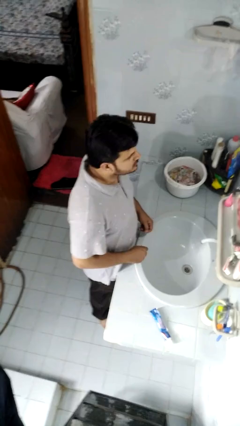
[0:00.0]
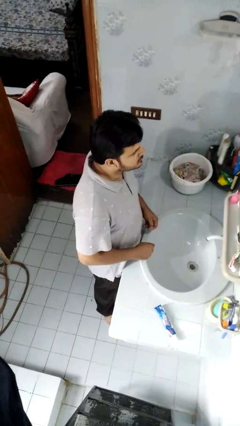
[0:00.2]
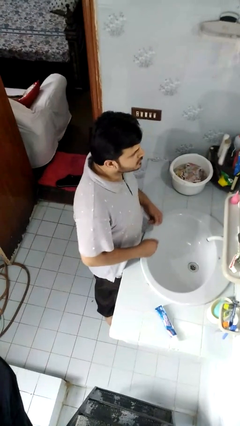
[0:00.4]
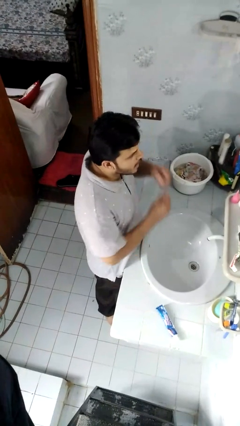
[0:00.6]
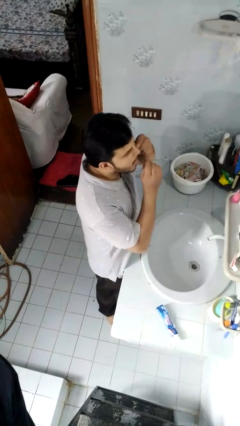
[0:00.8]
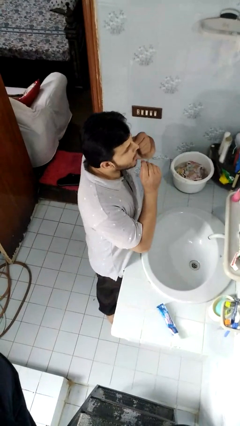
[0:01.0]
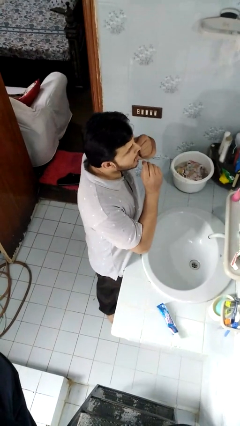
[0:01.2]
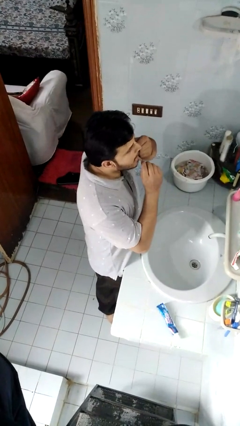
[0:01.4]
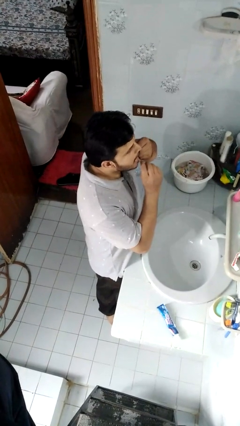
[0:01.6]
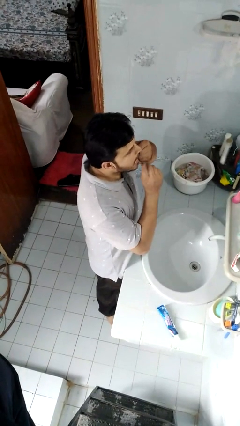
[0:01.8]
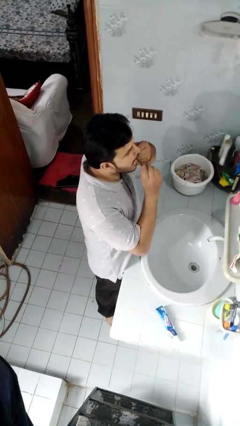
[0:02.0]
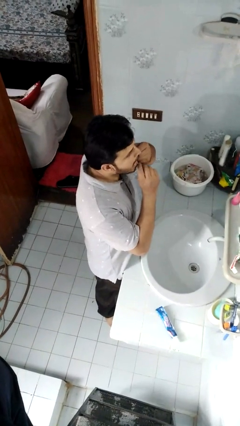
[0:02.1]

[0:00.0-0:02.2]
person flosses

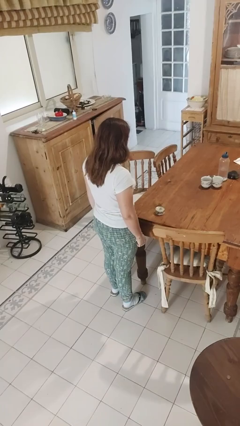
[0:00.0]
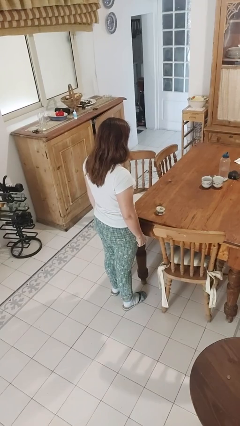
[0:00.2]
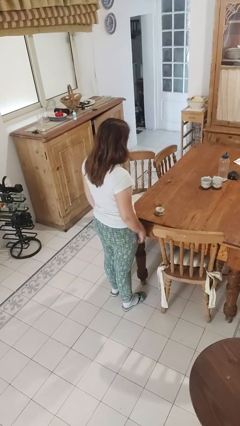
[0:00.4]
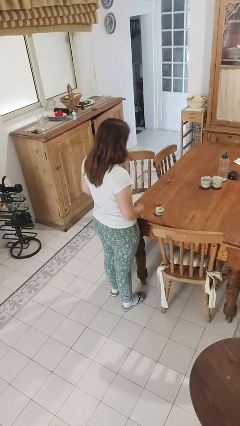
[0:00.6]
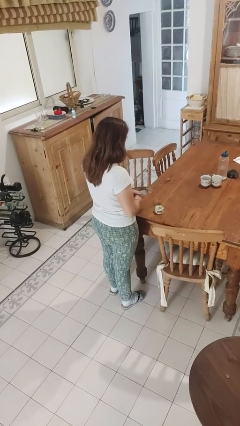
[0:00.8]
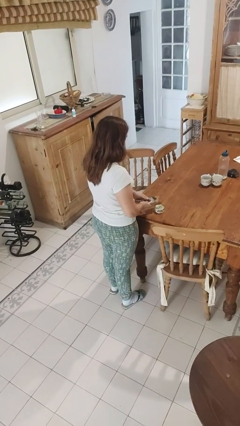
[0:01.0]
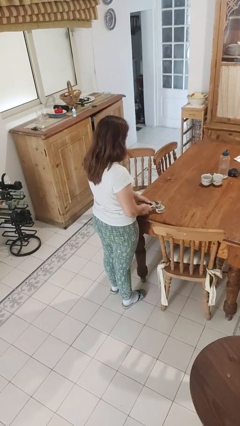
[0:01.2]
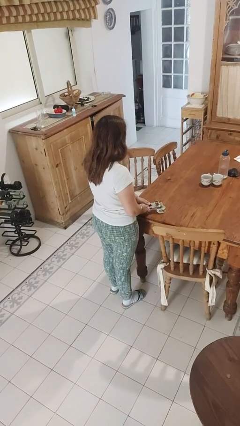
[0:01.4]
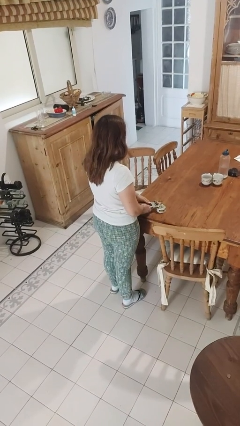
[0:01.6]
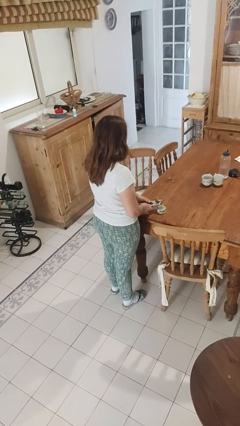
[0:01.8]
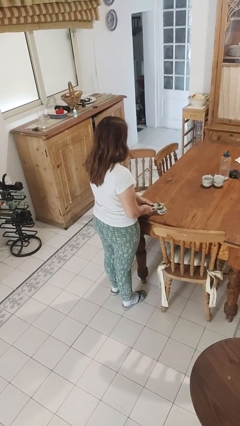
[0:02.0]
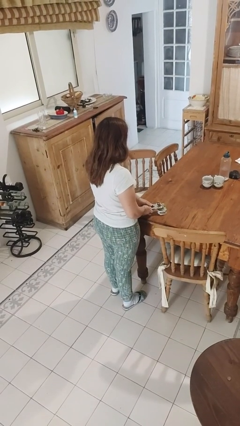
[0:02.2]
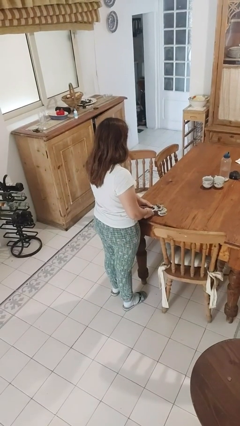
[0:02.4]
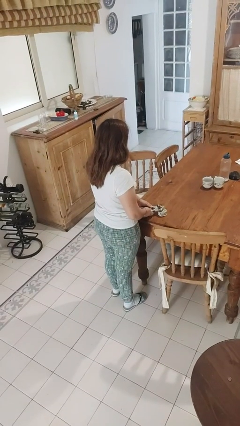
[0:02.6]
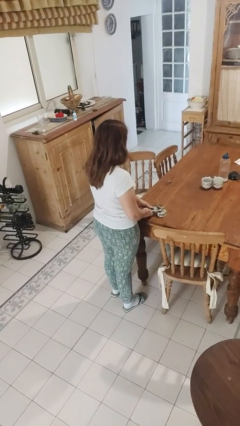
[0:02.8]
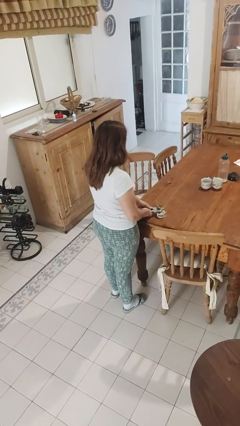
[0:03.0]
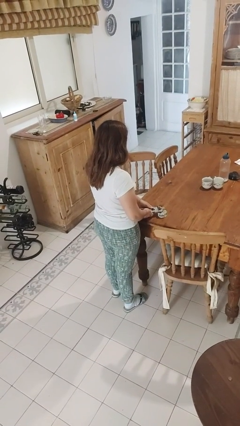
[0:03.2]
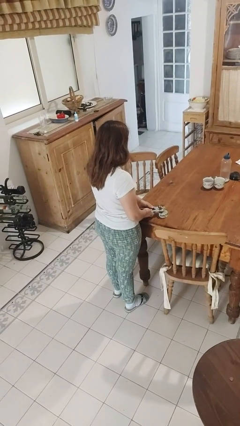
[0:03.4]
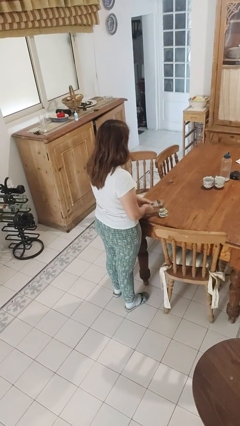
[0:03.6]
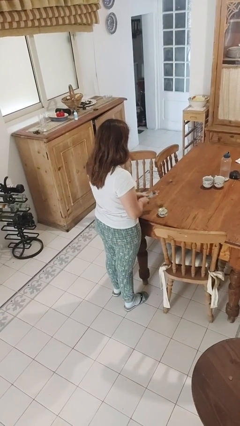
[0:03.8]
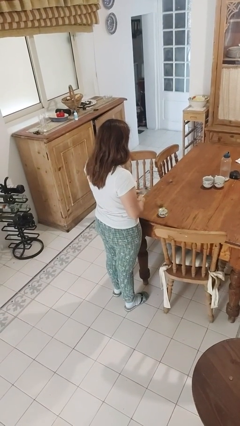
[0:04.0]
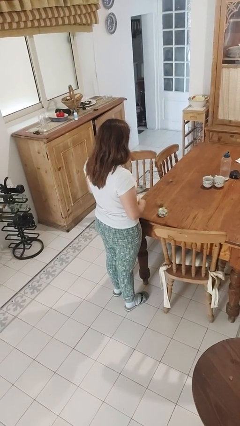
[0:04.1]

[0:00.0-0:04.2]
person opens can with can opener

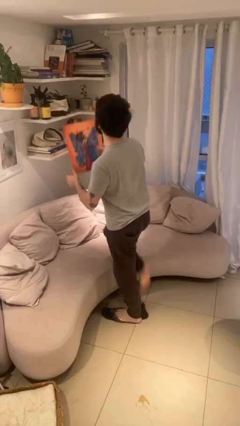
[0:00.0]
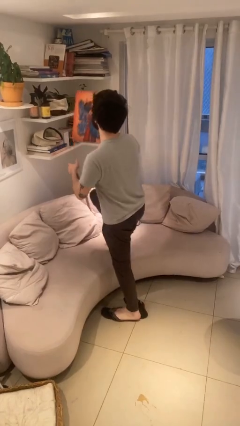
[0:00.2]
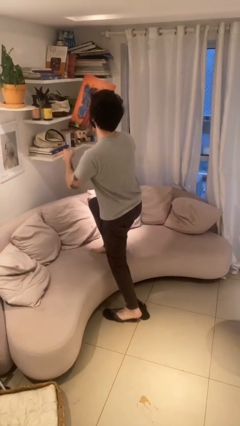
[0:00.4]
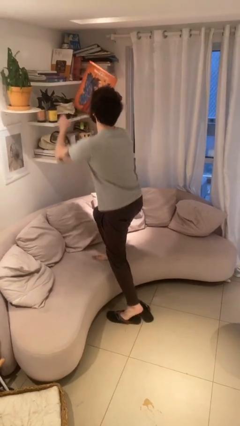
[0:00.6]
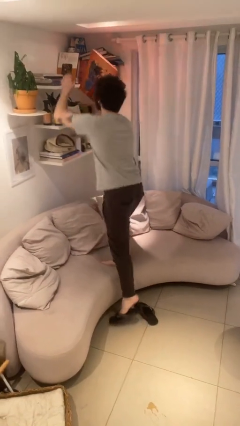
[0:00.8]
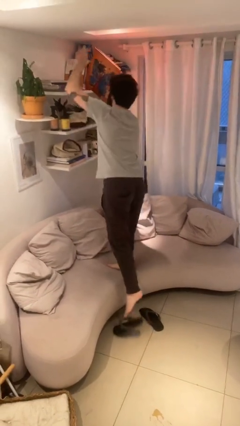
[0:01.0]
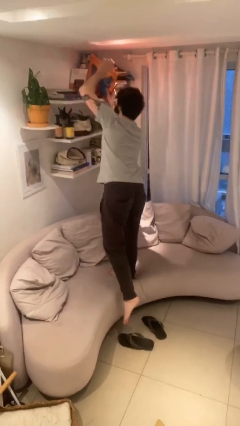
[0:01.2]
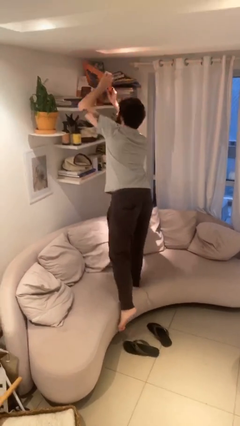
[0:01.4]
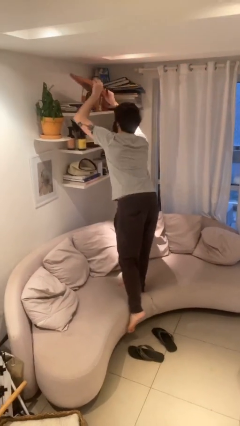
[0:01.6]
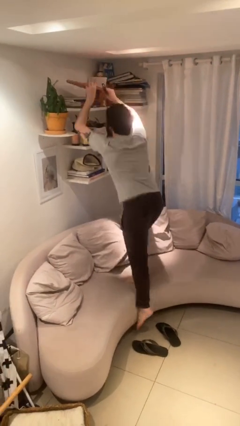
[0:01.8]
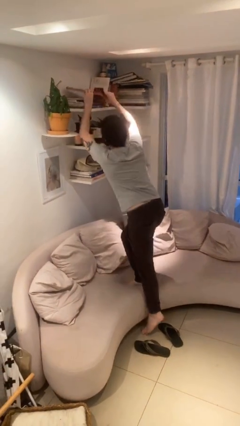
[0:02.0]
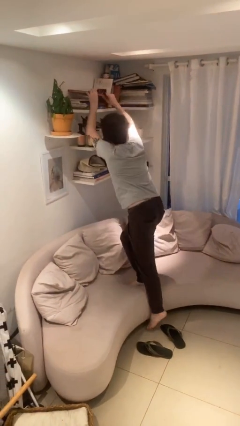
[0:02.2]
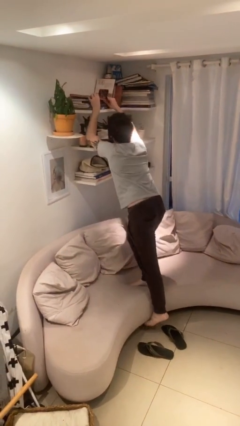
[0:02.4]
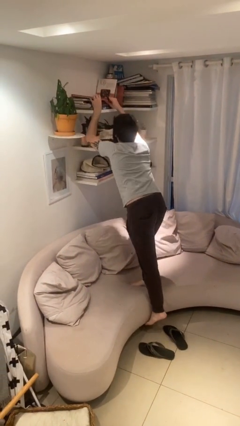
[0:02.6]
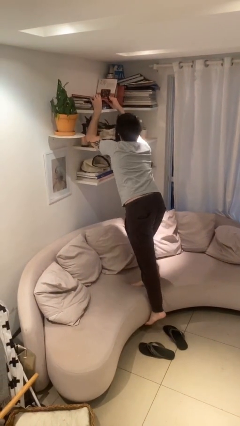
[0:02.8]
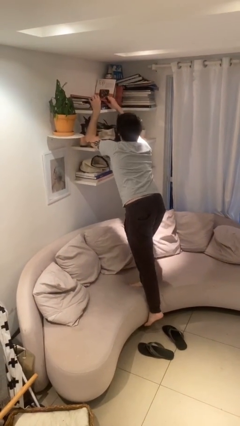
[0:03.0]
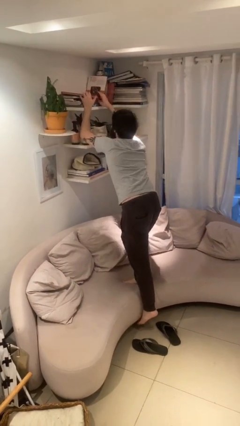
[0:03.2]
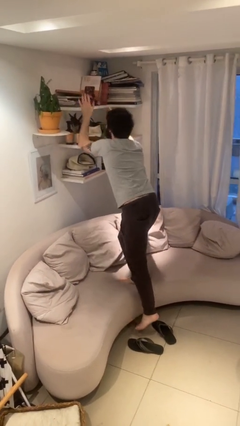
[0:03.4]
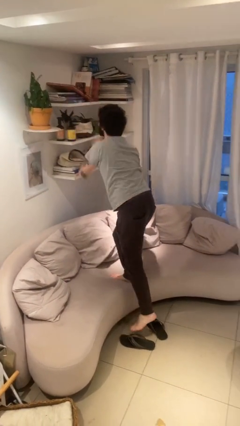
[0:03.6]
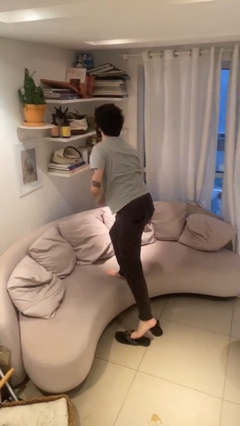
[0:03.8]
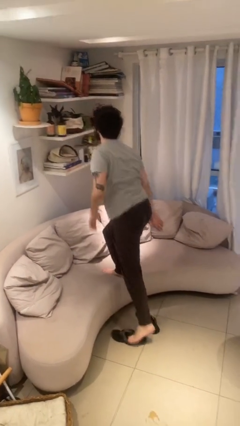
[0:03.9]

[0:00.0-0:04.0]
person puts down object on shelf

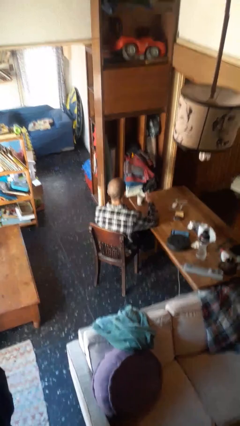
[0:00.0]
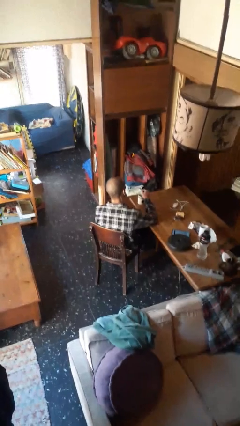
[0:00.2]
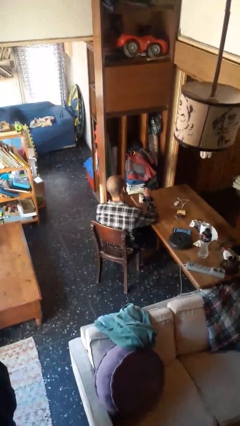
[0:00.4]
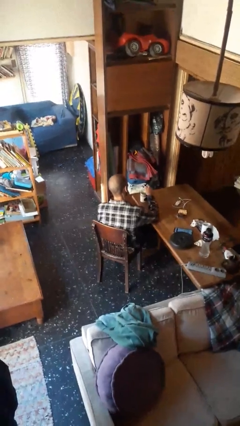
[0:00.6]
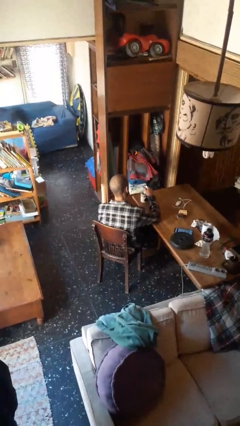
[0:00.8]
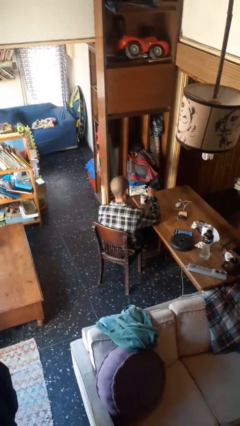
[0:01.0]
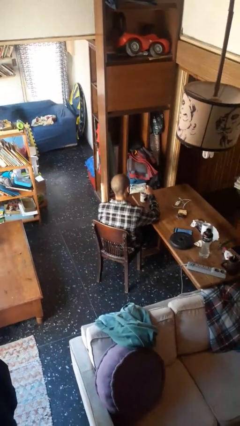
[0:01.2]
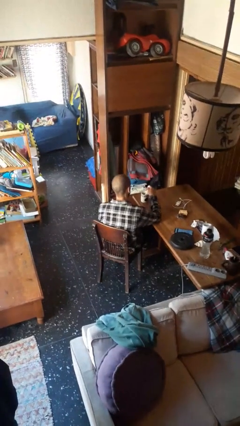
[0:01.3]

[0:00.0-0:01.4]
person stirs mug

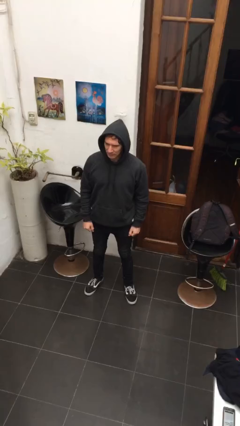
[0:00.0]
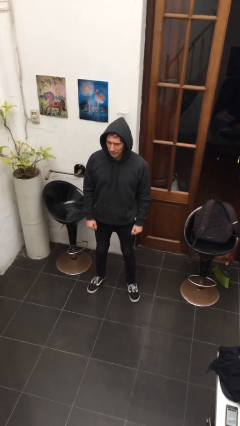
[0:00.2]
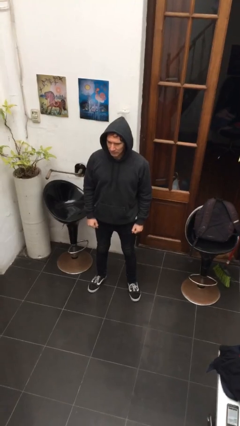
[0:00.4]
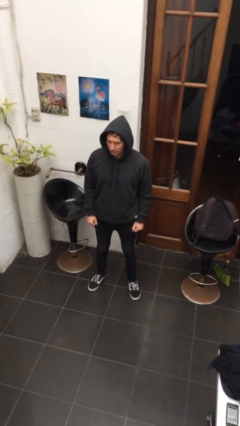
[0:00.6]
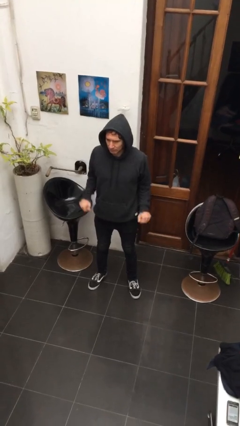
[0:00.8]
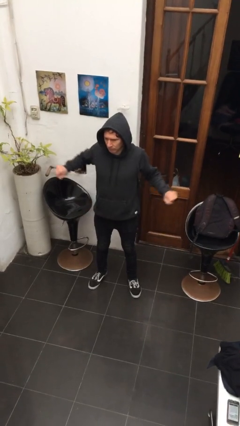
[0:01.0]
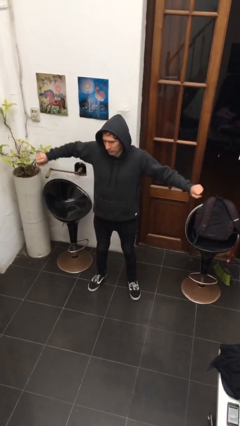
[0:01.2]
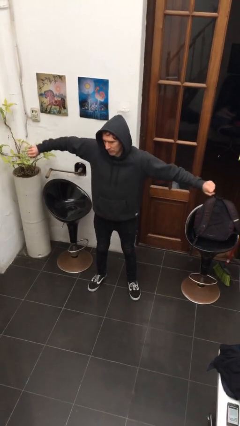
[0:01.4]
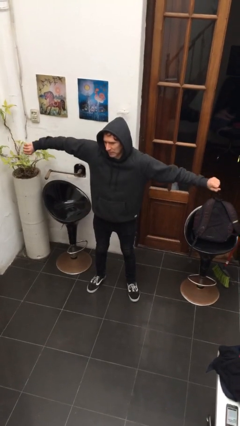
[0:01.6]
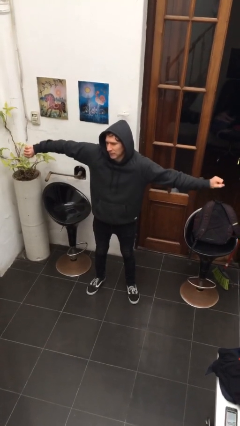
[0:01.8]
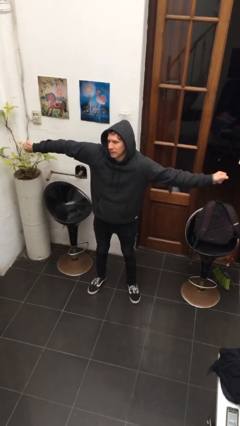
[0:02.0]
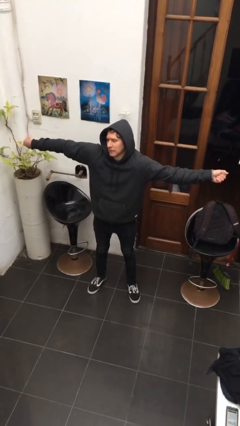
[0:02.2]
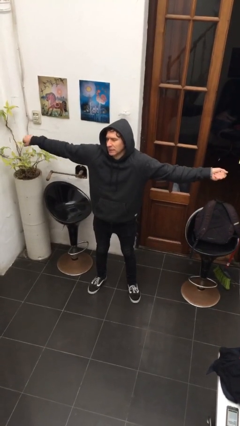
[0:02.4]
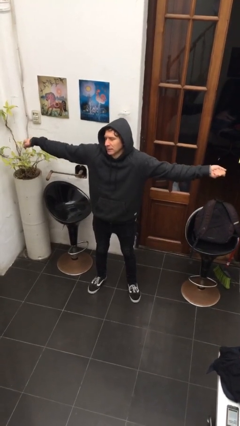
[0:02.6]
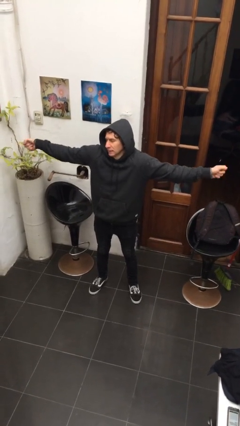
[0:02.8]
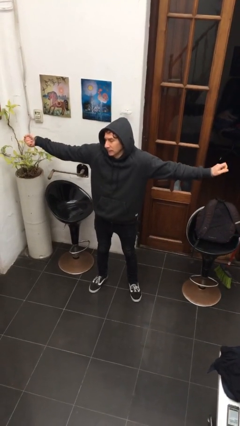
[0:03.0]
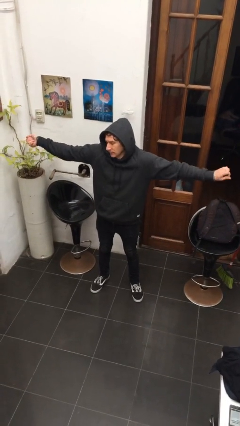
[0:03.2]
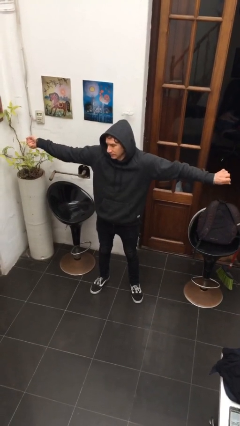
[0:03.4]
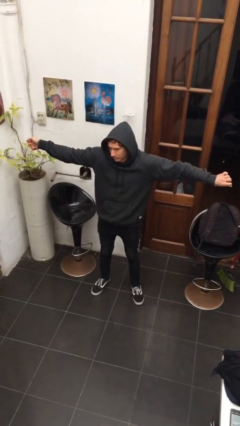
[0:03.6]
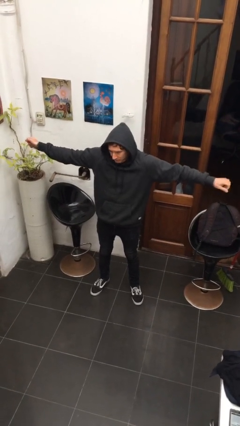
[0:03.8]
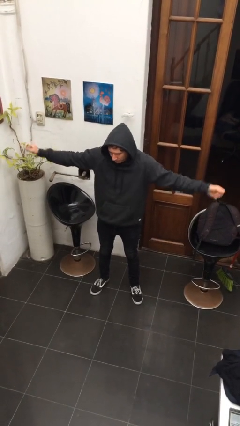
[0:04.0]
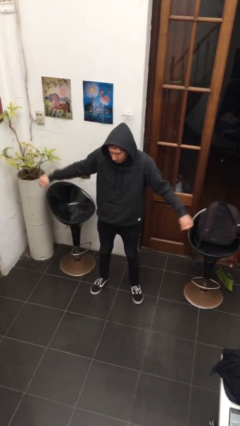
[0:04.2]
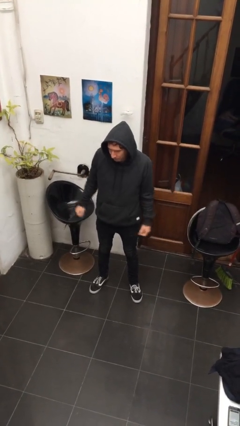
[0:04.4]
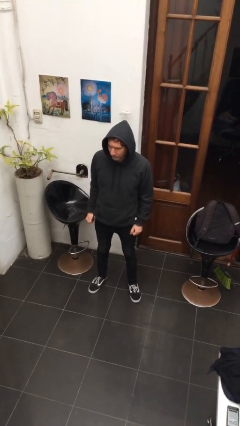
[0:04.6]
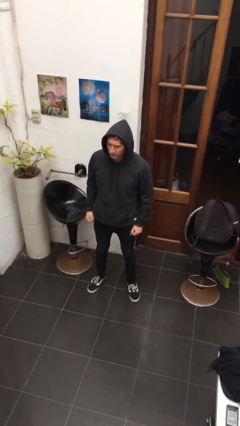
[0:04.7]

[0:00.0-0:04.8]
person stretches arms to side

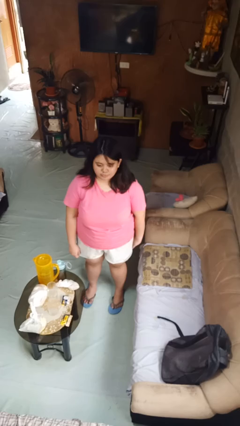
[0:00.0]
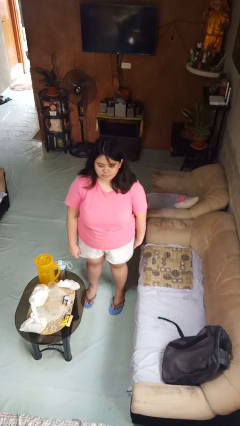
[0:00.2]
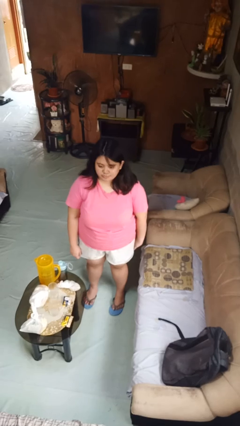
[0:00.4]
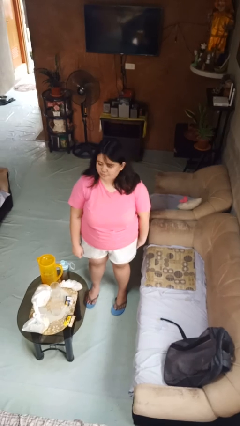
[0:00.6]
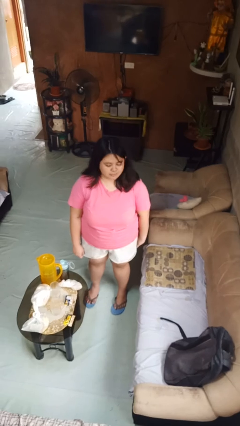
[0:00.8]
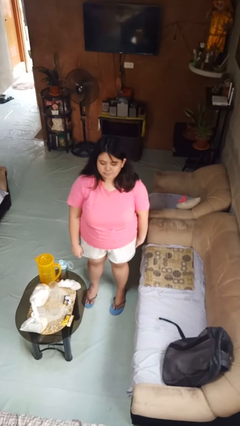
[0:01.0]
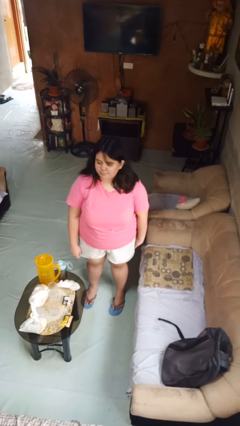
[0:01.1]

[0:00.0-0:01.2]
person shakes head
